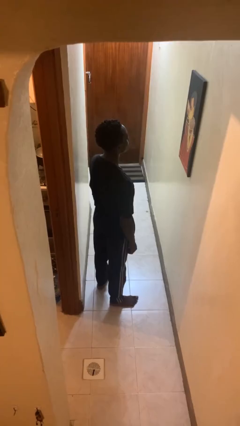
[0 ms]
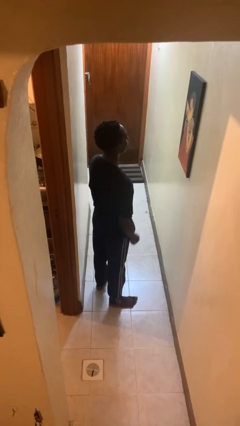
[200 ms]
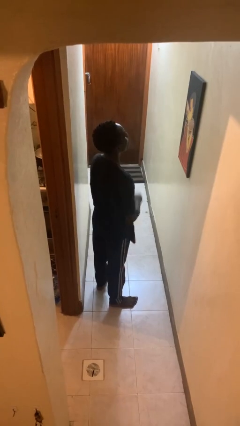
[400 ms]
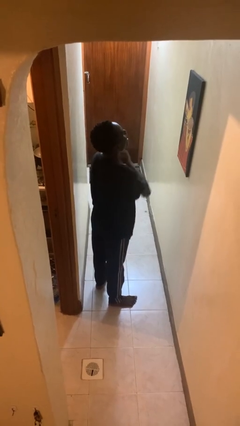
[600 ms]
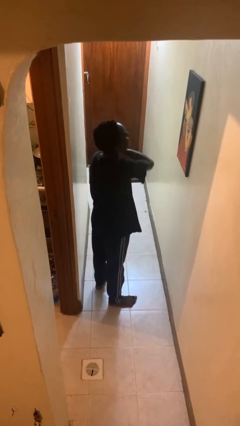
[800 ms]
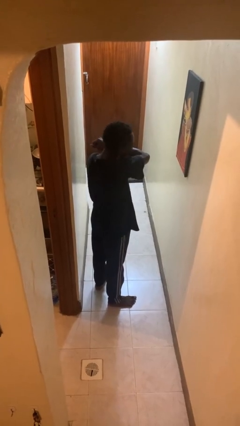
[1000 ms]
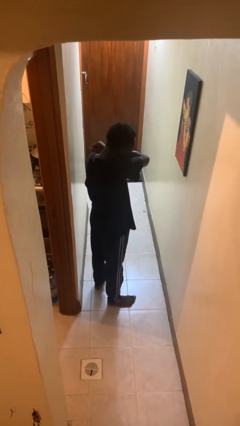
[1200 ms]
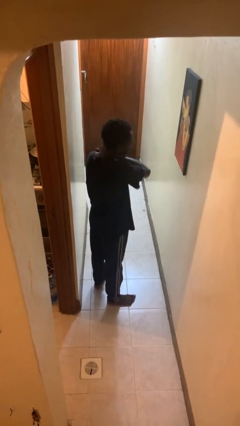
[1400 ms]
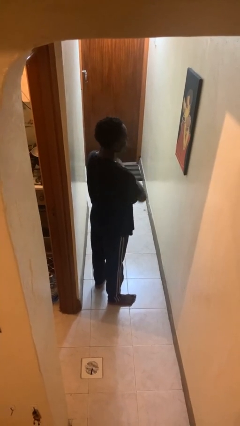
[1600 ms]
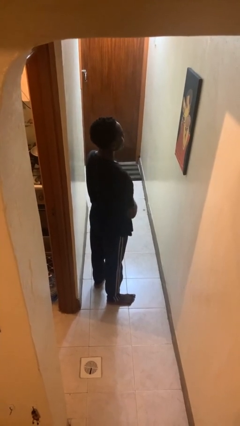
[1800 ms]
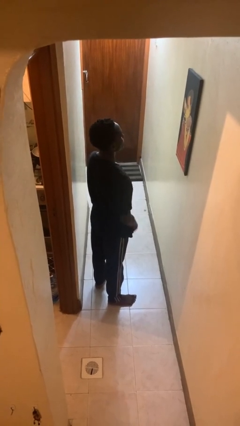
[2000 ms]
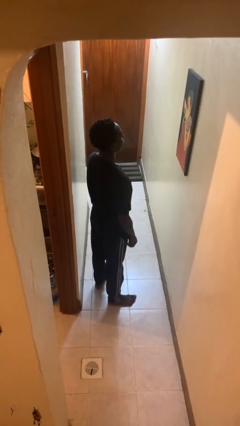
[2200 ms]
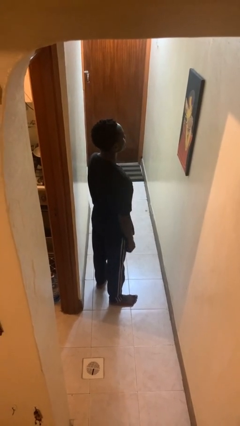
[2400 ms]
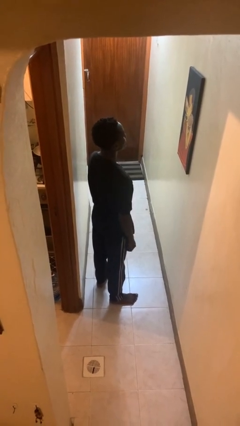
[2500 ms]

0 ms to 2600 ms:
person sneezes into arm

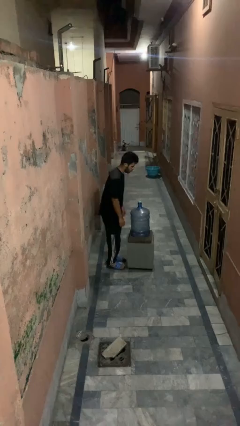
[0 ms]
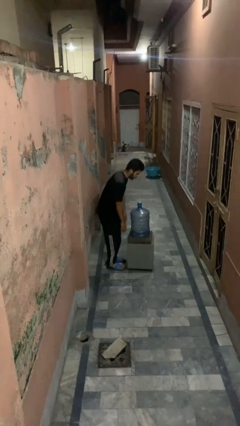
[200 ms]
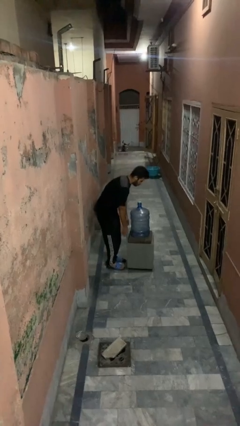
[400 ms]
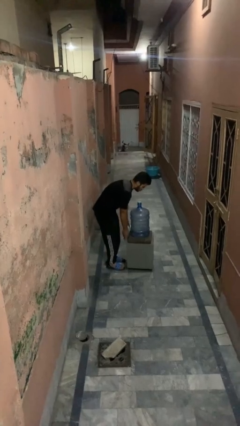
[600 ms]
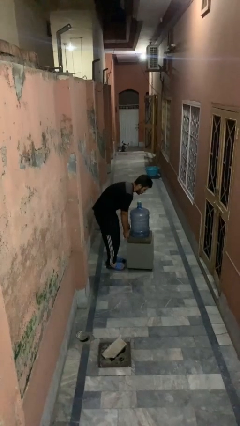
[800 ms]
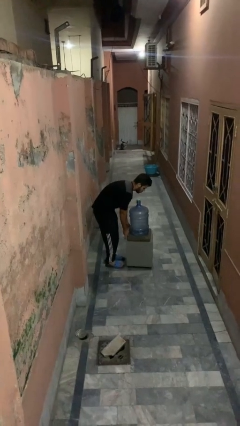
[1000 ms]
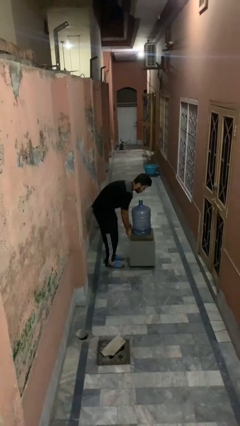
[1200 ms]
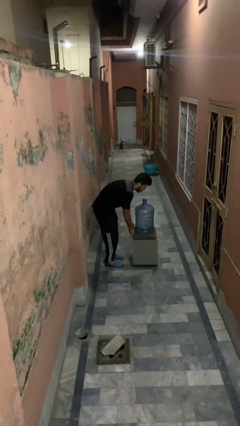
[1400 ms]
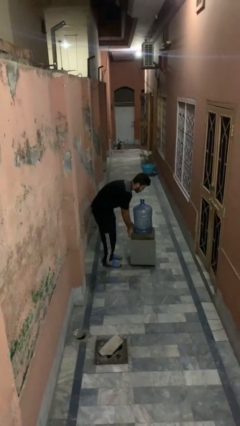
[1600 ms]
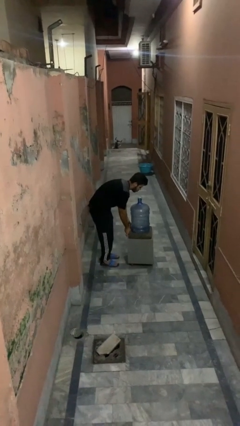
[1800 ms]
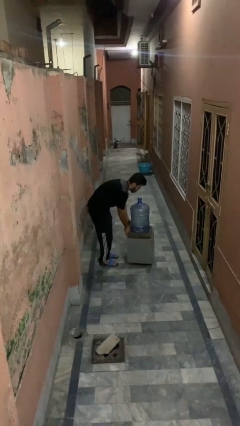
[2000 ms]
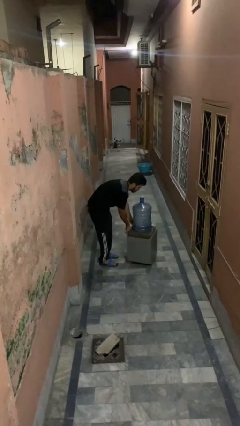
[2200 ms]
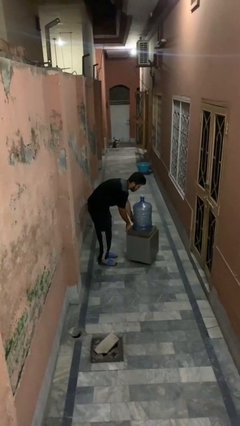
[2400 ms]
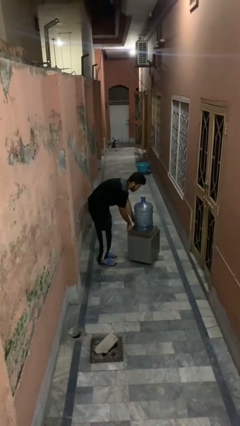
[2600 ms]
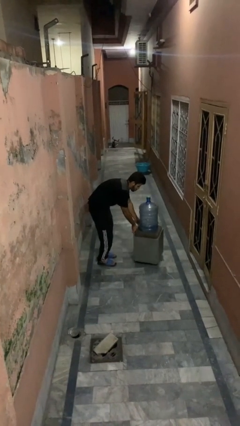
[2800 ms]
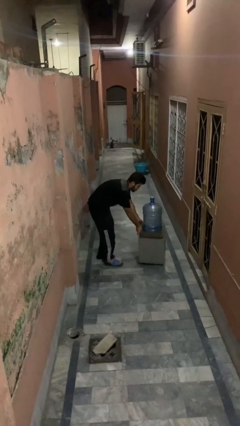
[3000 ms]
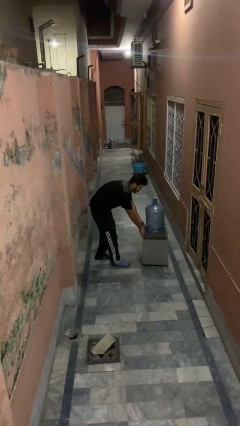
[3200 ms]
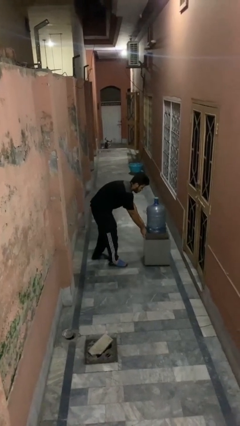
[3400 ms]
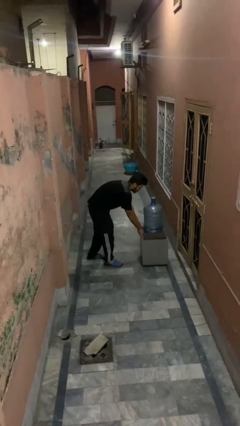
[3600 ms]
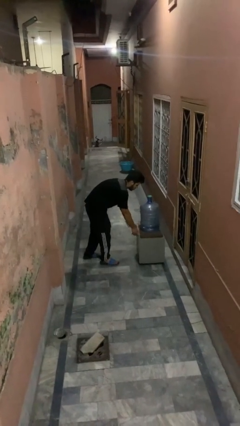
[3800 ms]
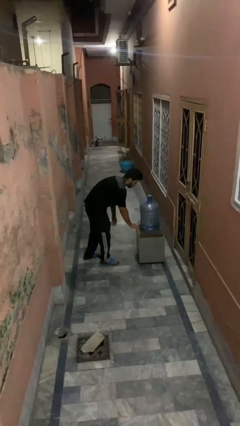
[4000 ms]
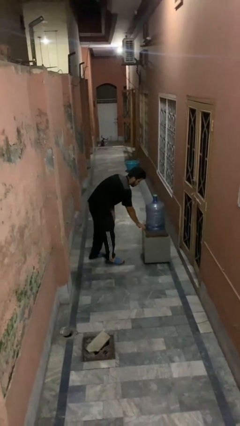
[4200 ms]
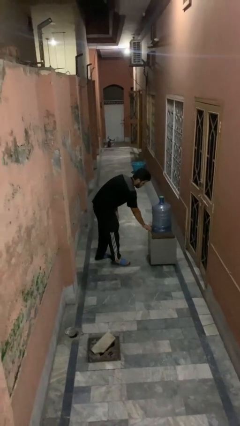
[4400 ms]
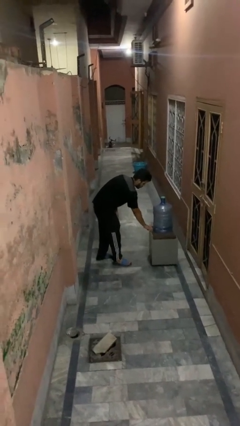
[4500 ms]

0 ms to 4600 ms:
person pushes wheeled cart

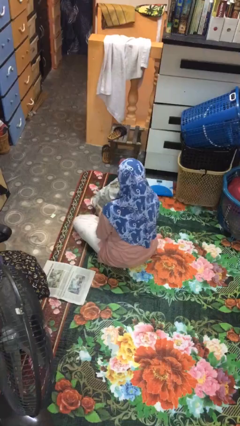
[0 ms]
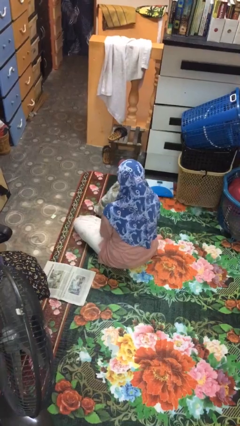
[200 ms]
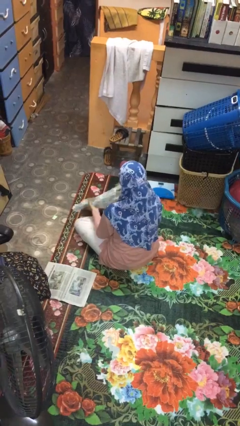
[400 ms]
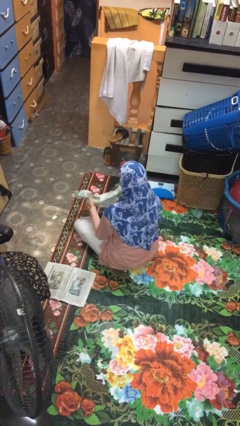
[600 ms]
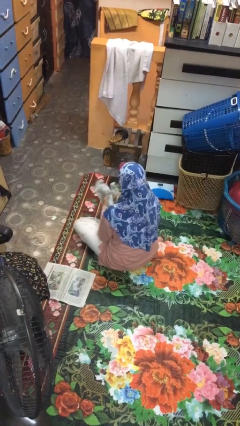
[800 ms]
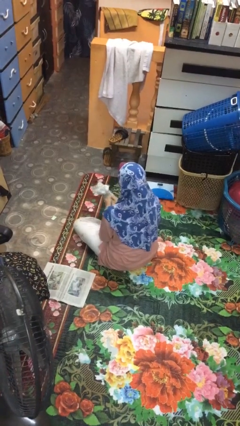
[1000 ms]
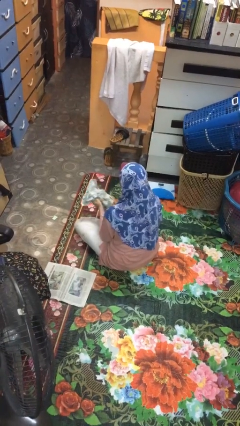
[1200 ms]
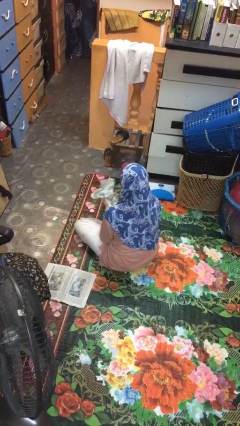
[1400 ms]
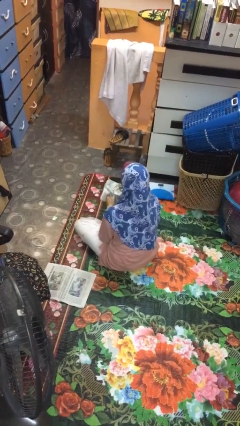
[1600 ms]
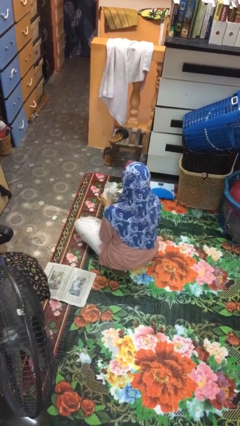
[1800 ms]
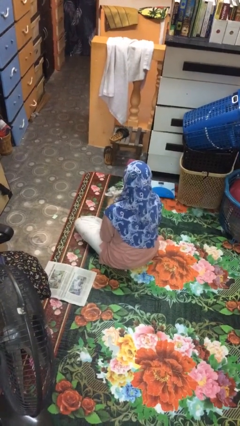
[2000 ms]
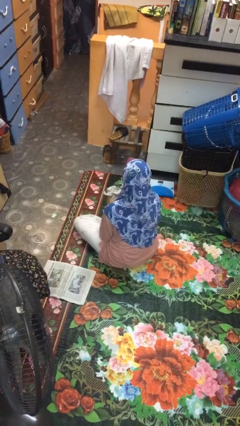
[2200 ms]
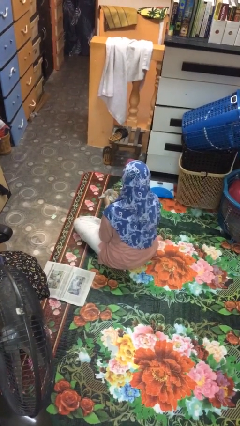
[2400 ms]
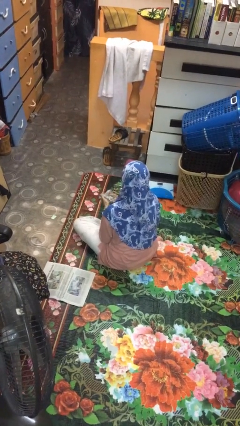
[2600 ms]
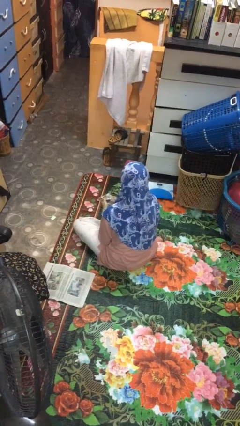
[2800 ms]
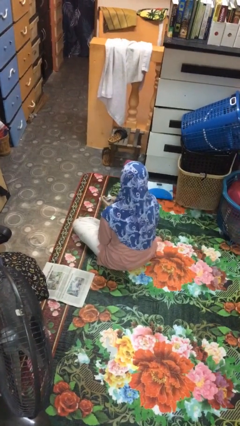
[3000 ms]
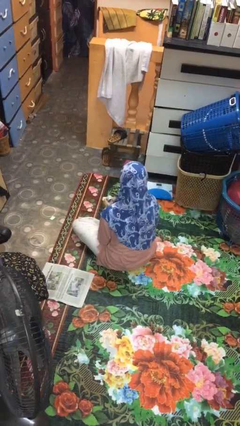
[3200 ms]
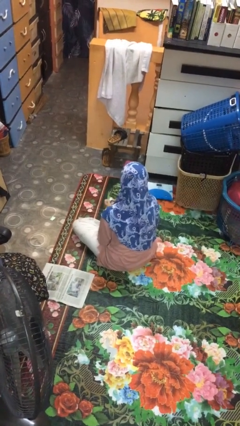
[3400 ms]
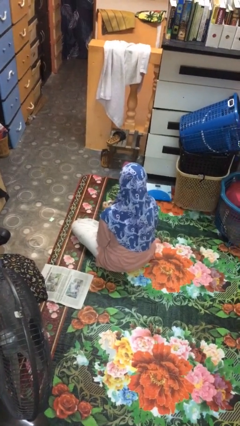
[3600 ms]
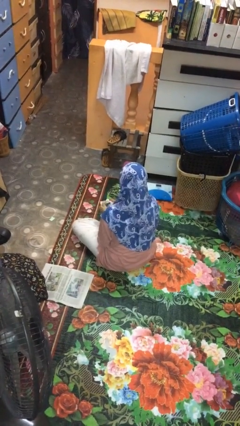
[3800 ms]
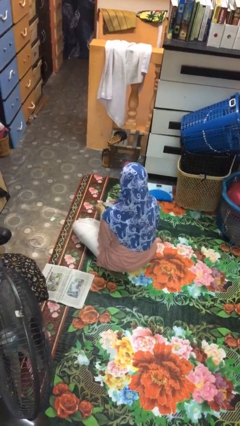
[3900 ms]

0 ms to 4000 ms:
person crumples paper

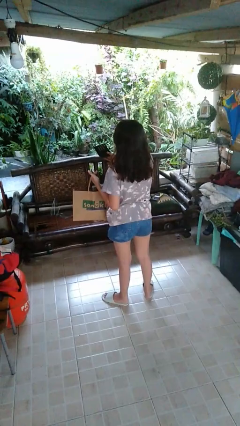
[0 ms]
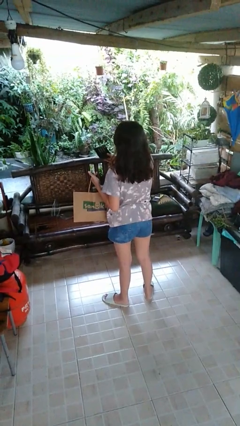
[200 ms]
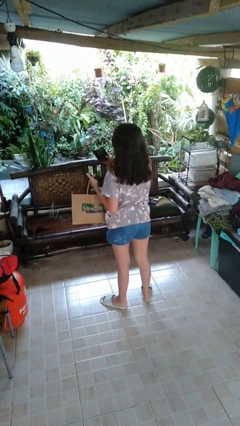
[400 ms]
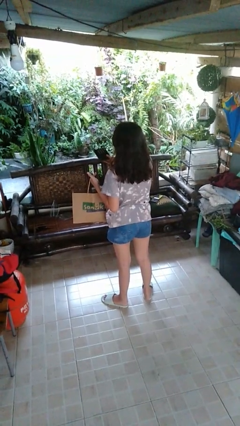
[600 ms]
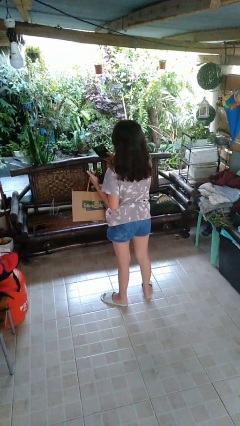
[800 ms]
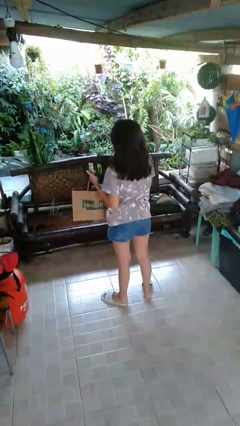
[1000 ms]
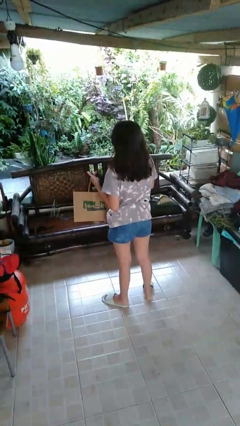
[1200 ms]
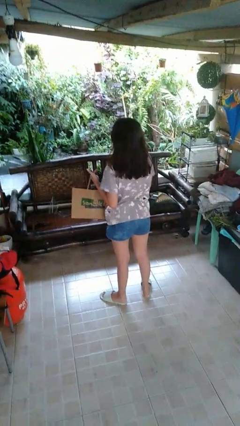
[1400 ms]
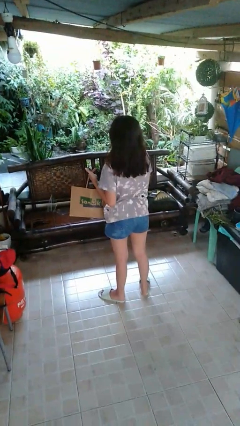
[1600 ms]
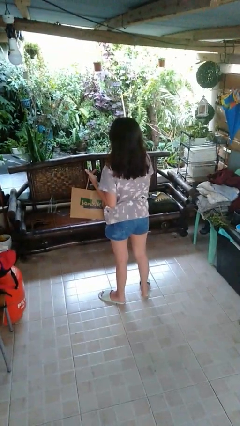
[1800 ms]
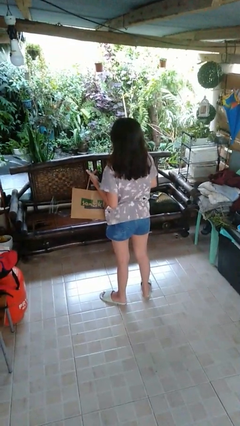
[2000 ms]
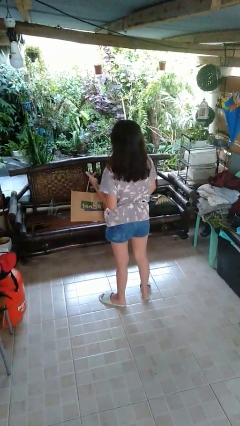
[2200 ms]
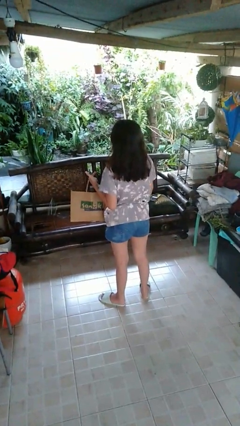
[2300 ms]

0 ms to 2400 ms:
person puts object into bag

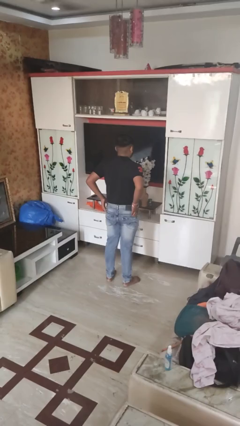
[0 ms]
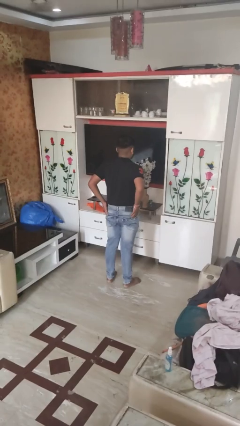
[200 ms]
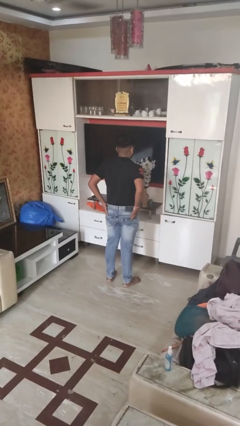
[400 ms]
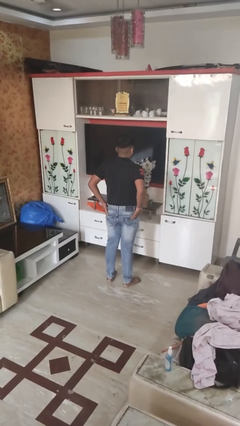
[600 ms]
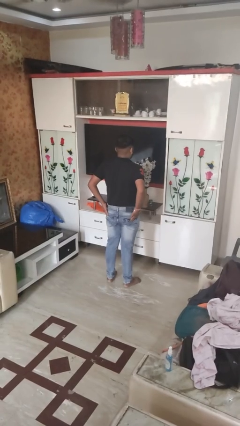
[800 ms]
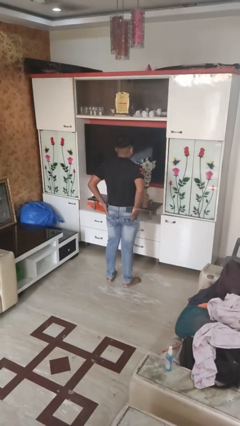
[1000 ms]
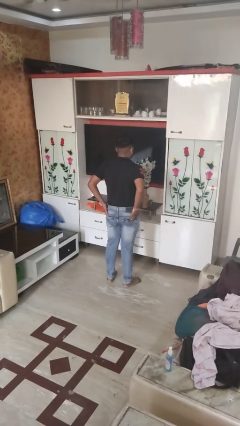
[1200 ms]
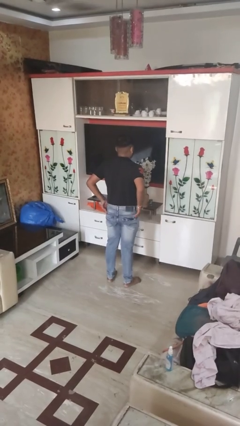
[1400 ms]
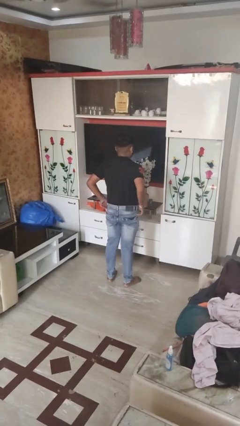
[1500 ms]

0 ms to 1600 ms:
person puts hands in back pockets

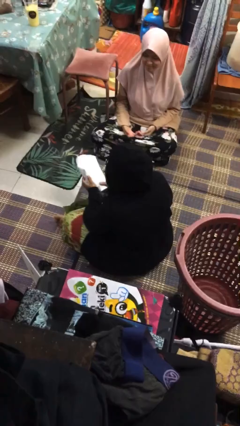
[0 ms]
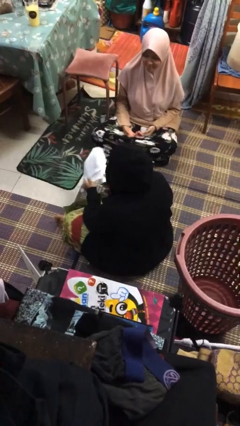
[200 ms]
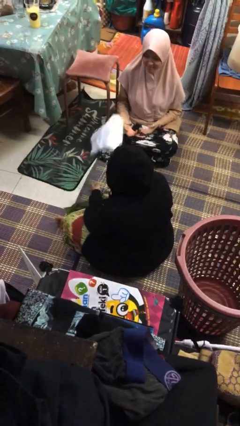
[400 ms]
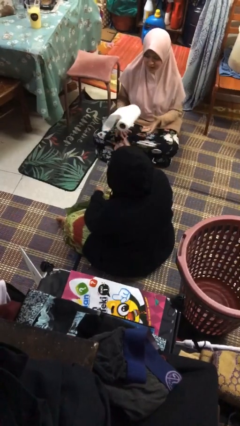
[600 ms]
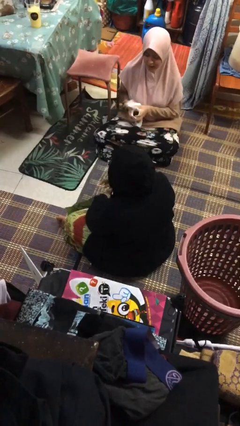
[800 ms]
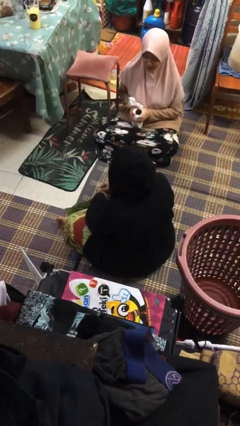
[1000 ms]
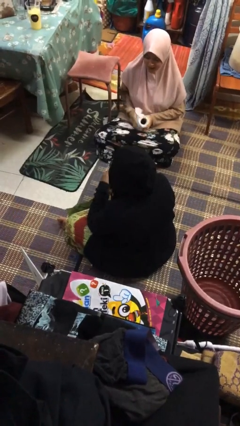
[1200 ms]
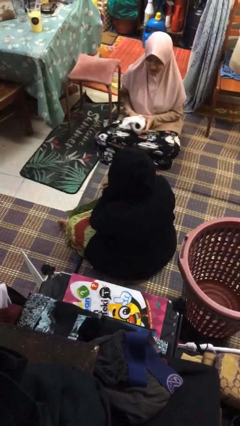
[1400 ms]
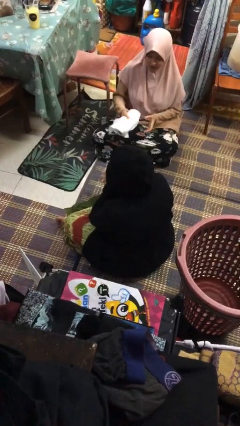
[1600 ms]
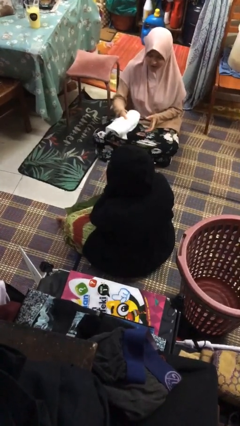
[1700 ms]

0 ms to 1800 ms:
person throws object to person
